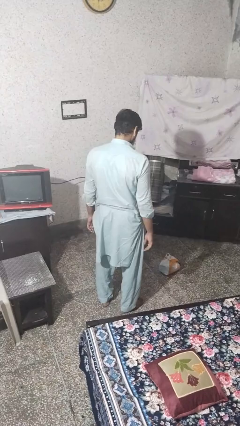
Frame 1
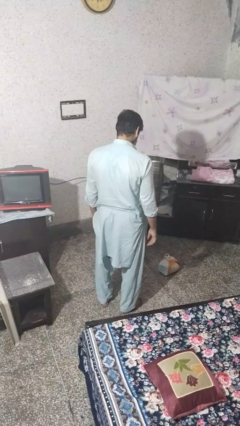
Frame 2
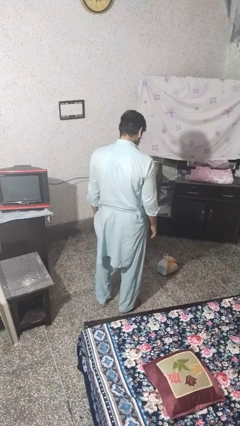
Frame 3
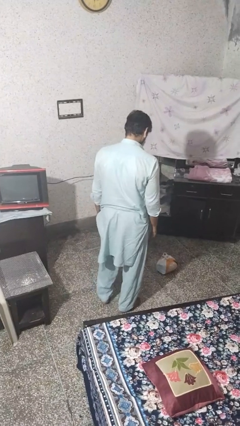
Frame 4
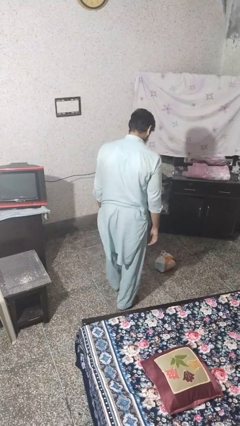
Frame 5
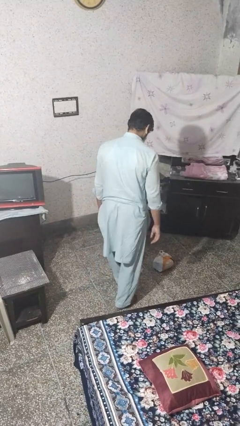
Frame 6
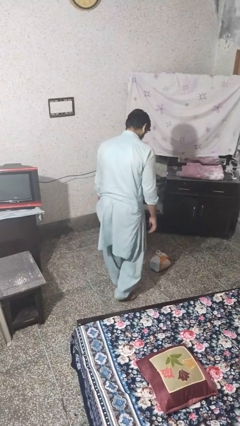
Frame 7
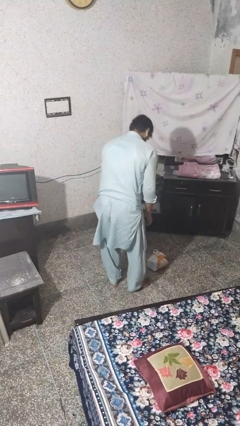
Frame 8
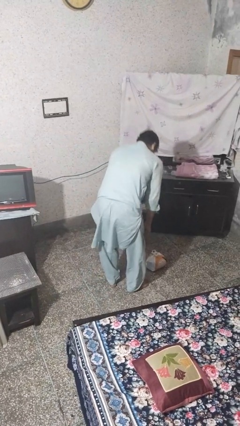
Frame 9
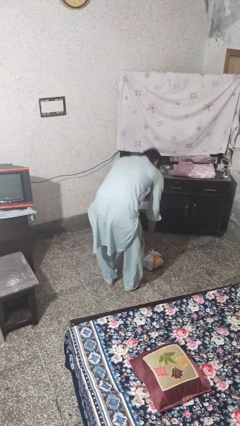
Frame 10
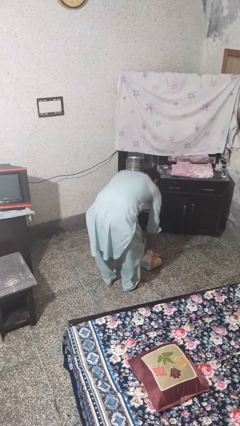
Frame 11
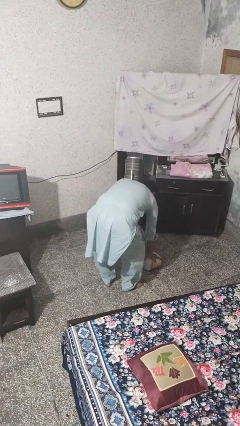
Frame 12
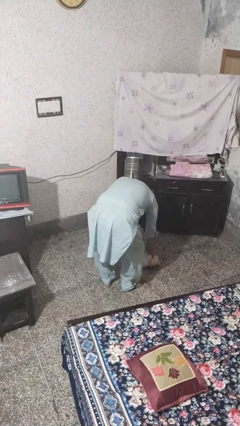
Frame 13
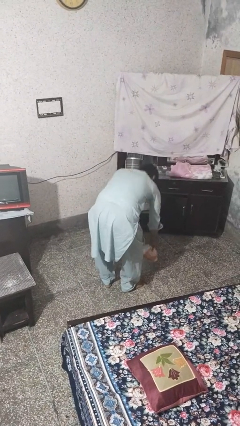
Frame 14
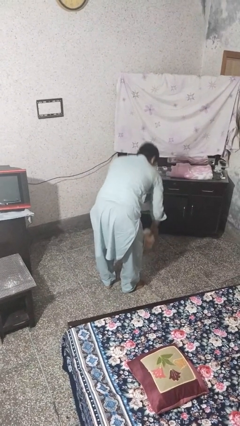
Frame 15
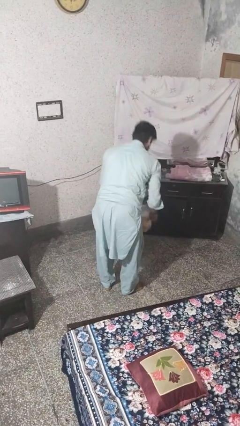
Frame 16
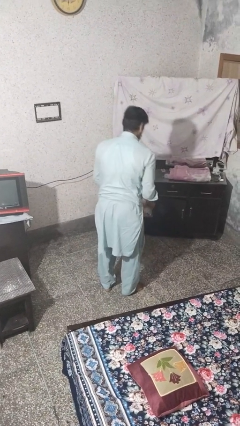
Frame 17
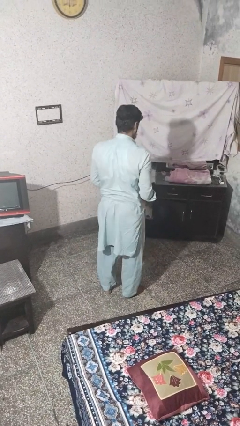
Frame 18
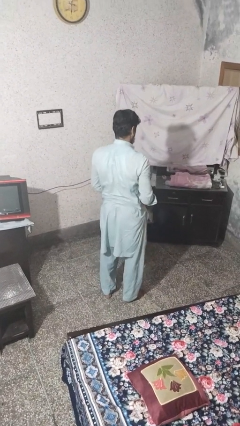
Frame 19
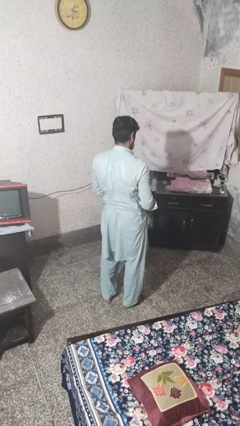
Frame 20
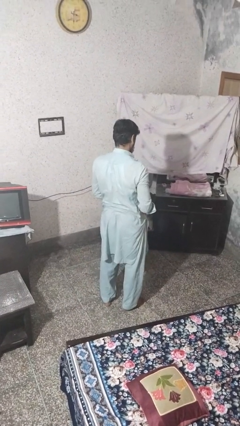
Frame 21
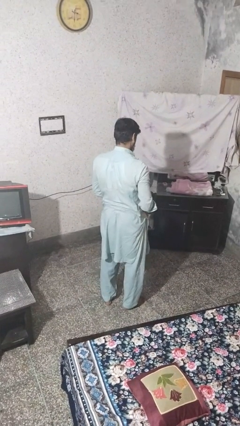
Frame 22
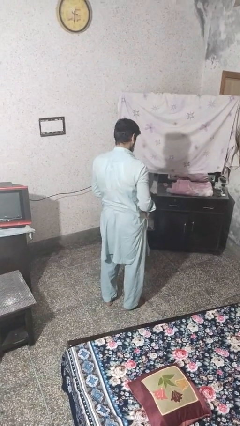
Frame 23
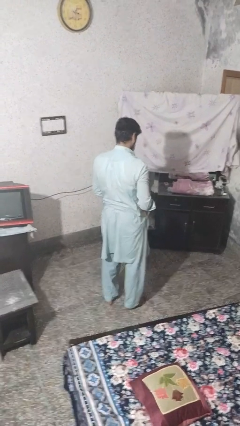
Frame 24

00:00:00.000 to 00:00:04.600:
person picks up object from floor

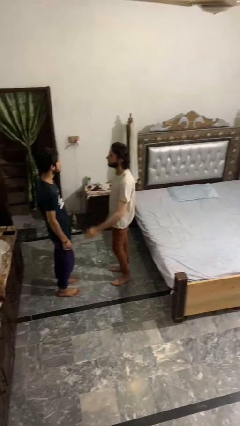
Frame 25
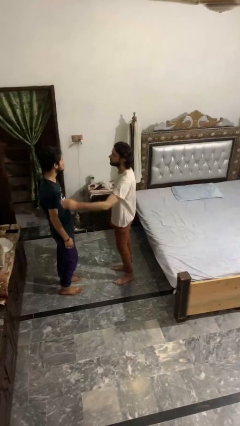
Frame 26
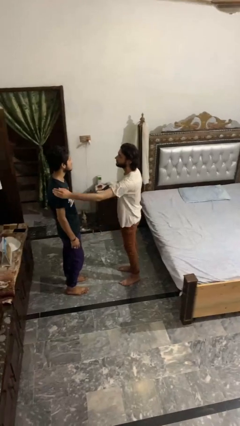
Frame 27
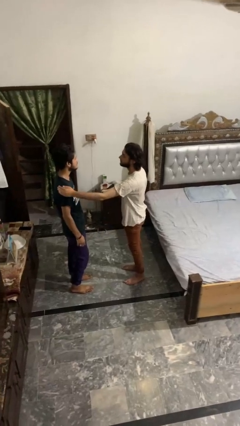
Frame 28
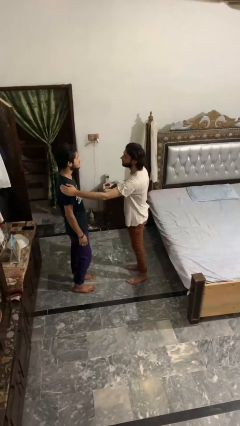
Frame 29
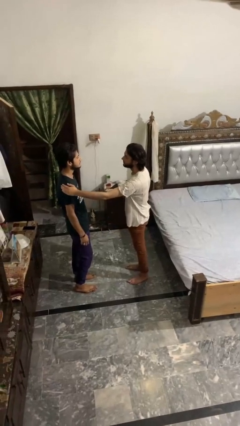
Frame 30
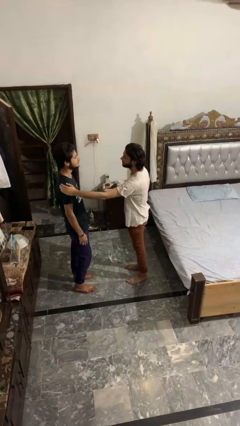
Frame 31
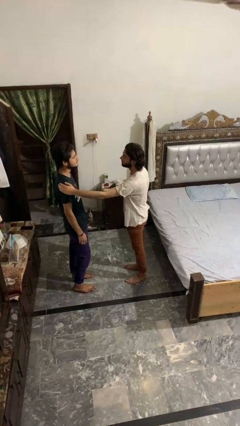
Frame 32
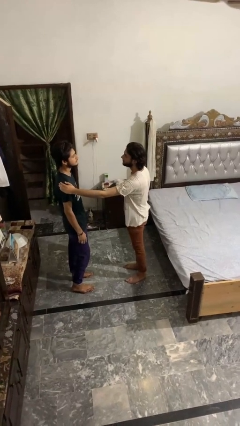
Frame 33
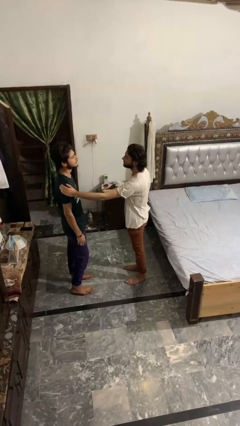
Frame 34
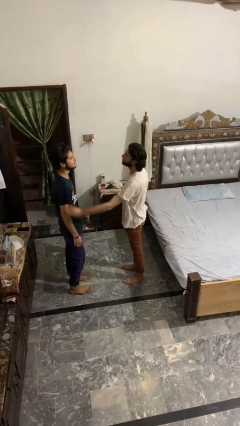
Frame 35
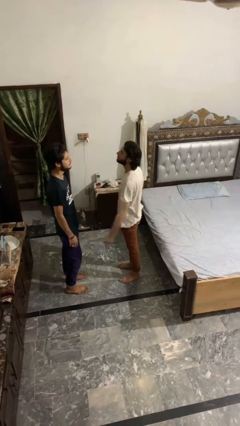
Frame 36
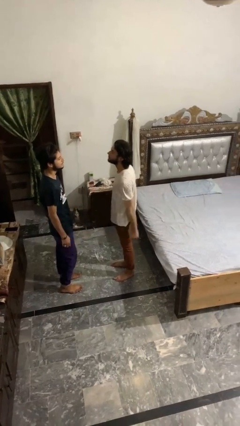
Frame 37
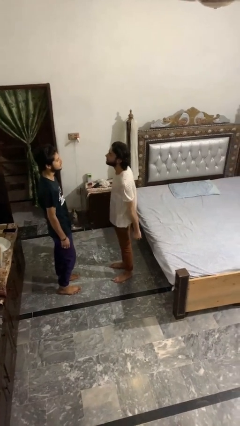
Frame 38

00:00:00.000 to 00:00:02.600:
person pounds shoulders of person

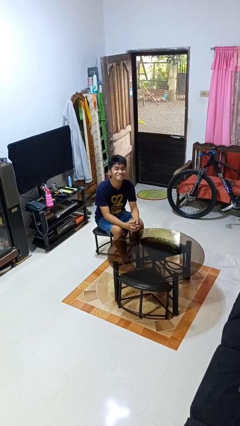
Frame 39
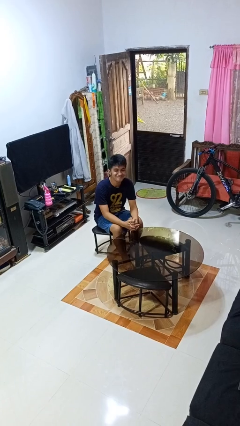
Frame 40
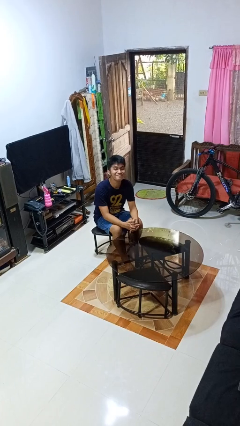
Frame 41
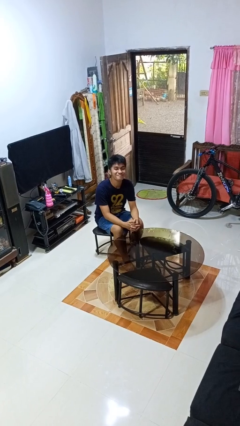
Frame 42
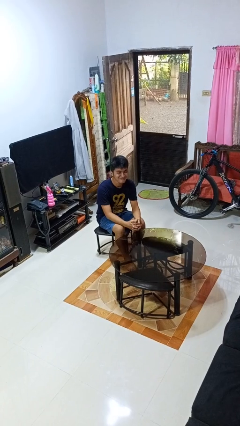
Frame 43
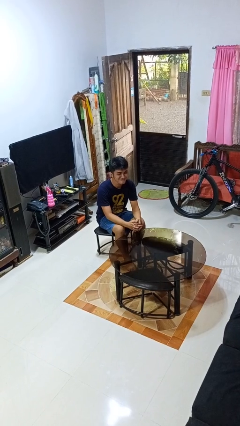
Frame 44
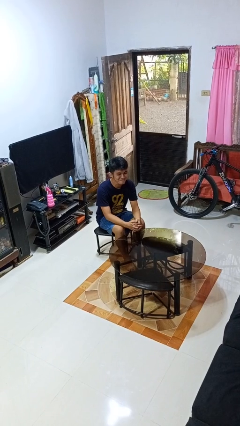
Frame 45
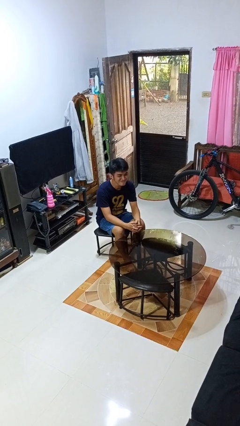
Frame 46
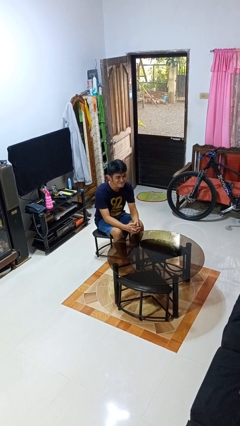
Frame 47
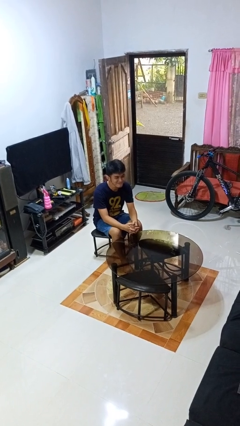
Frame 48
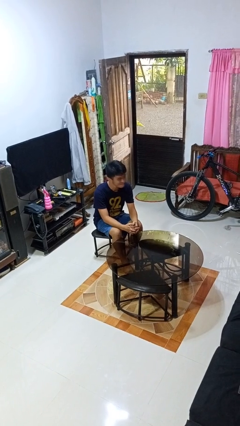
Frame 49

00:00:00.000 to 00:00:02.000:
person nods head

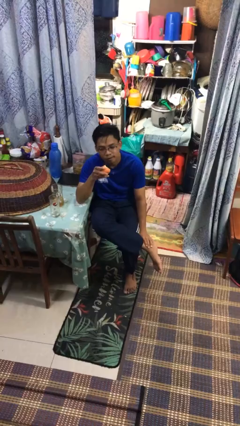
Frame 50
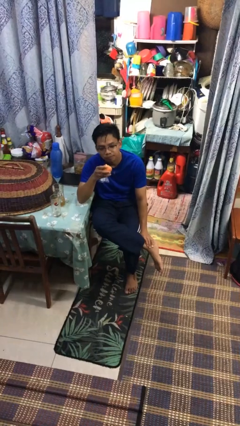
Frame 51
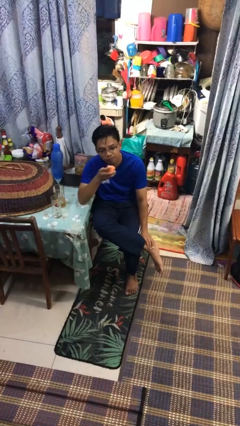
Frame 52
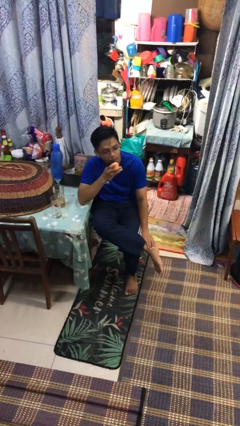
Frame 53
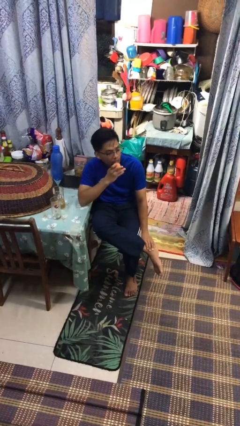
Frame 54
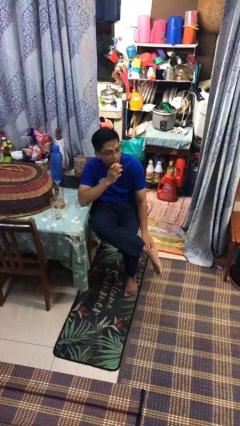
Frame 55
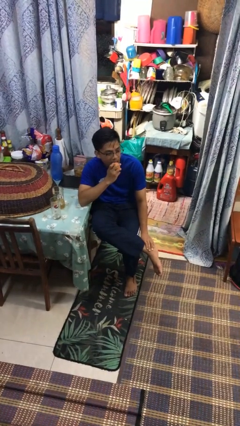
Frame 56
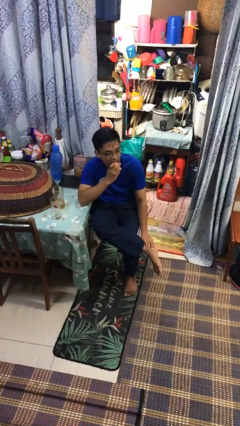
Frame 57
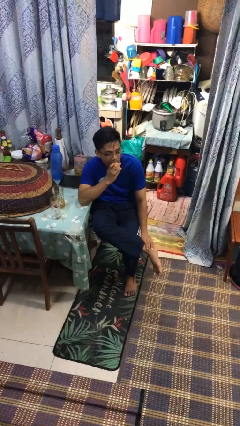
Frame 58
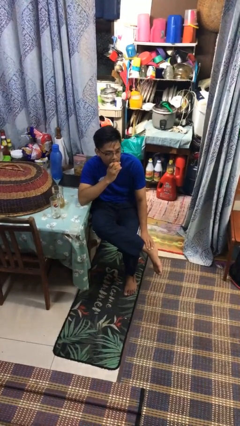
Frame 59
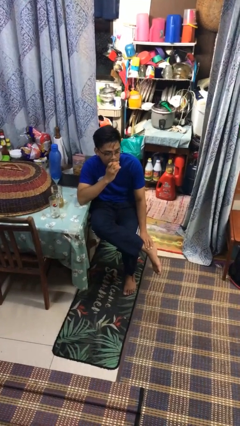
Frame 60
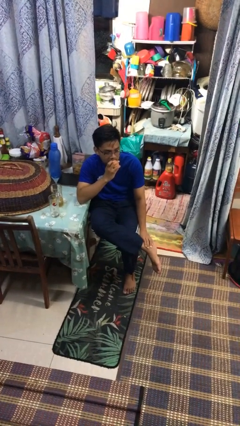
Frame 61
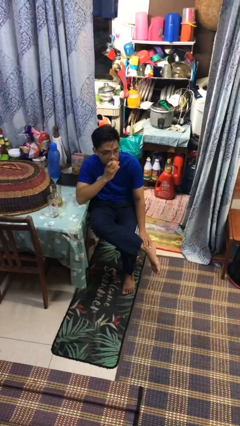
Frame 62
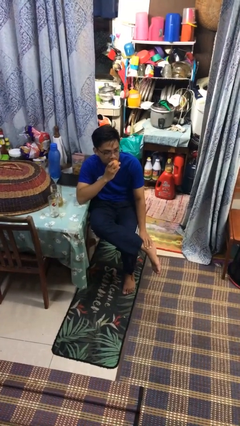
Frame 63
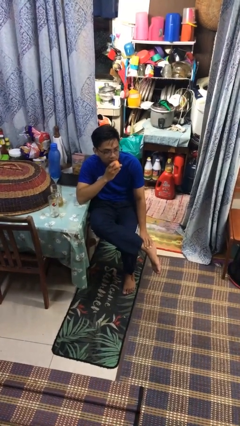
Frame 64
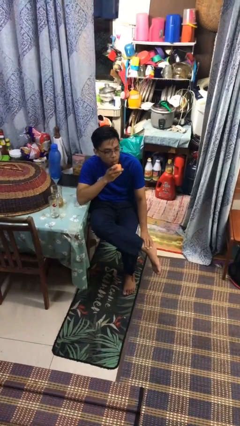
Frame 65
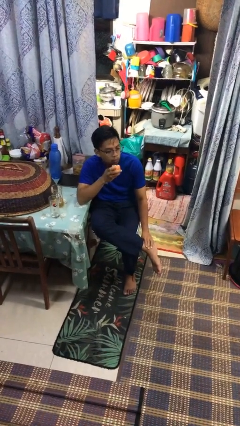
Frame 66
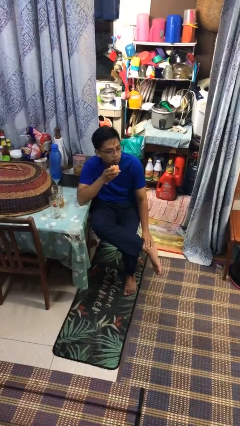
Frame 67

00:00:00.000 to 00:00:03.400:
person eats apple

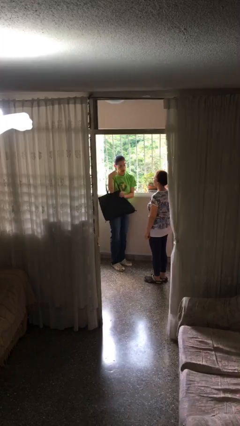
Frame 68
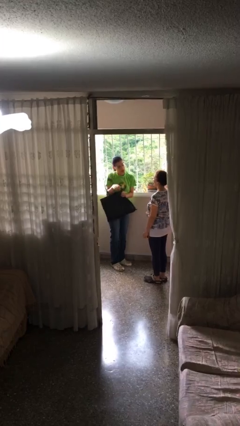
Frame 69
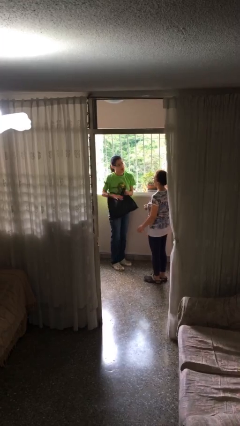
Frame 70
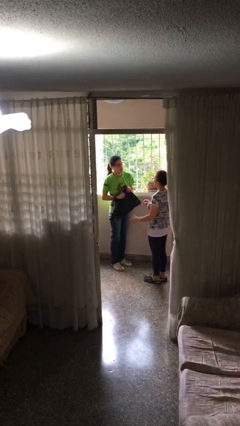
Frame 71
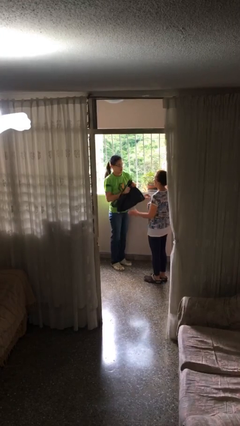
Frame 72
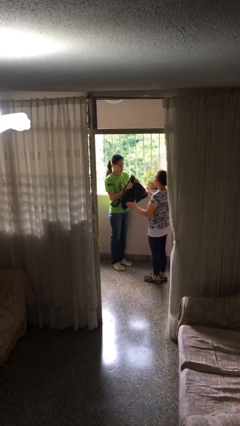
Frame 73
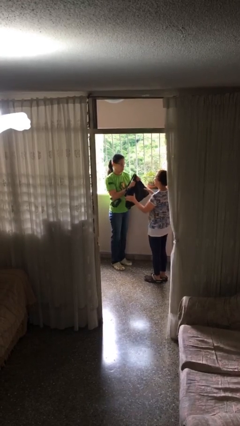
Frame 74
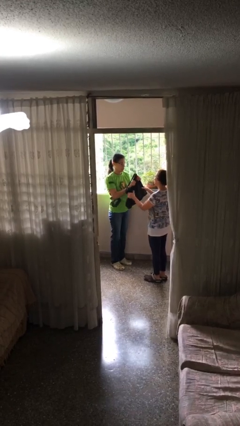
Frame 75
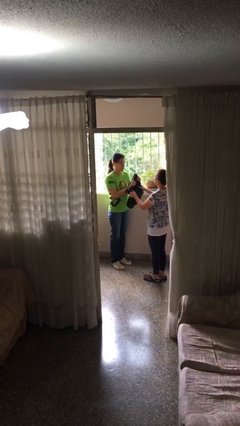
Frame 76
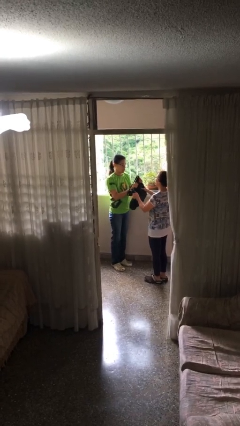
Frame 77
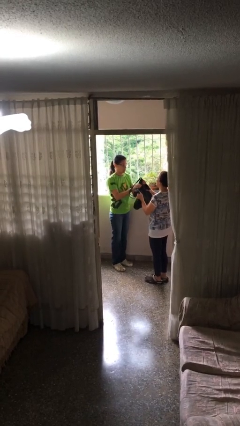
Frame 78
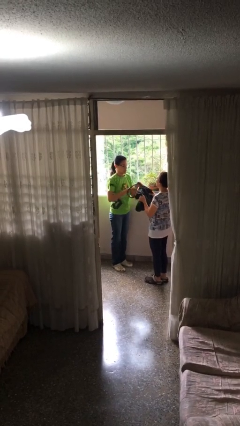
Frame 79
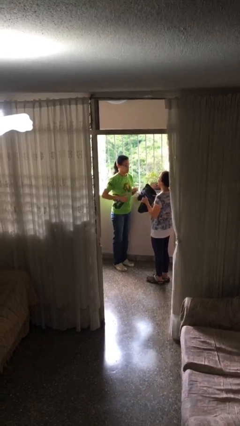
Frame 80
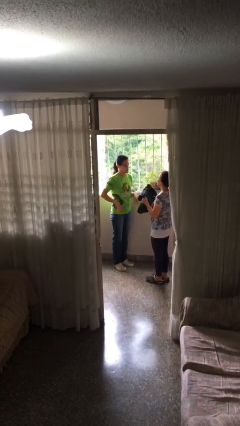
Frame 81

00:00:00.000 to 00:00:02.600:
person transfers object to person

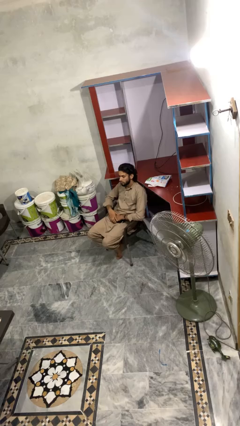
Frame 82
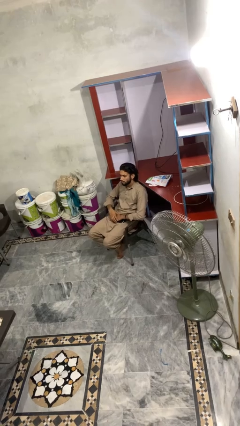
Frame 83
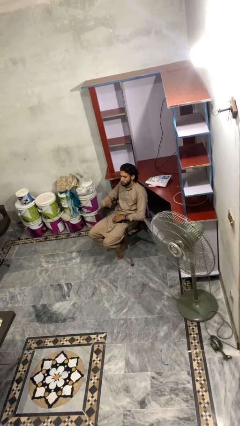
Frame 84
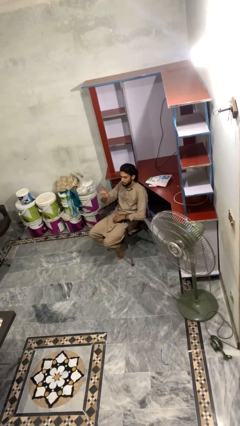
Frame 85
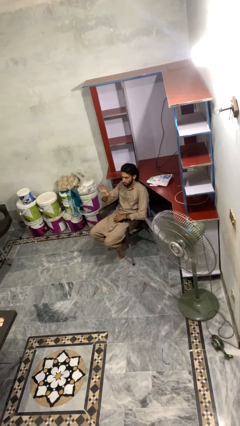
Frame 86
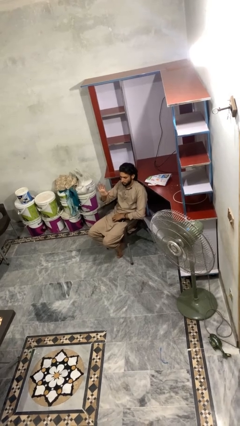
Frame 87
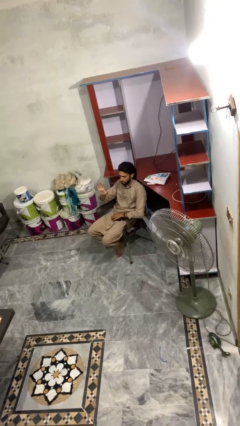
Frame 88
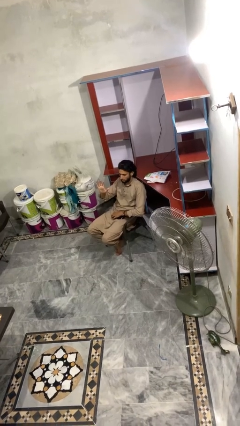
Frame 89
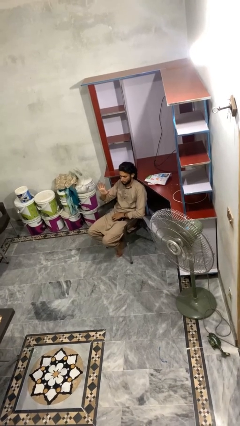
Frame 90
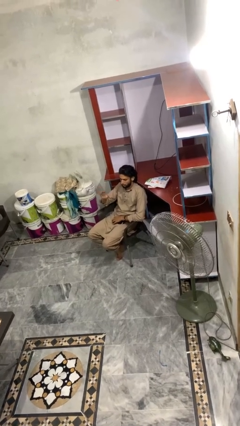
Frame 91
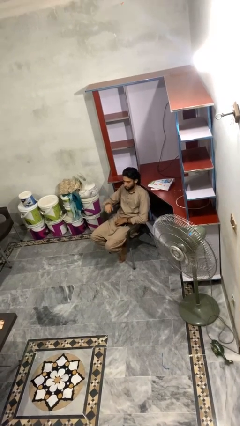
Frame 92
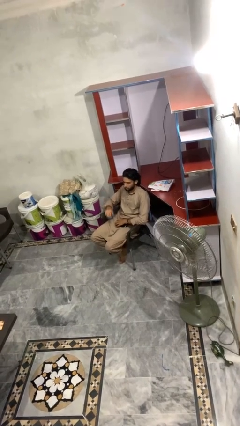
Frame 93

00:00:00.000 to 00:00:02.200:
person gestures number five
